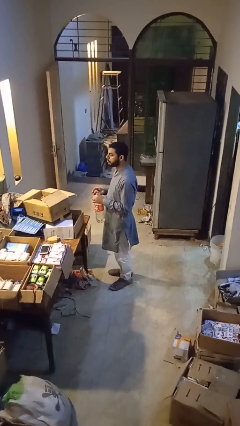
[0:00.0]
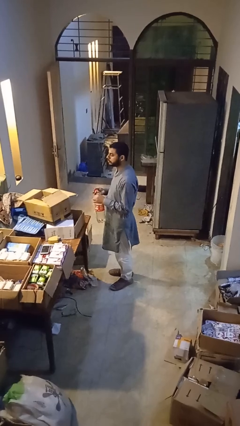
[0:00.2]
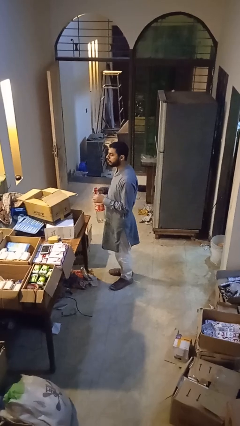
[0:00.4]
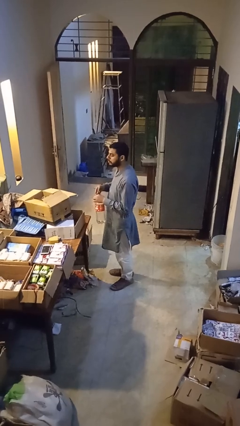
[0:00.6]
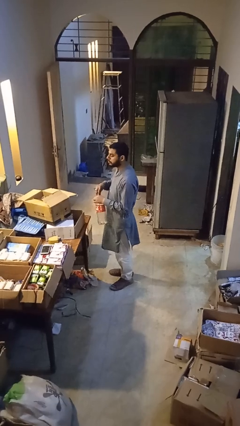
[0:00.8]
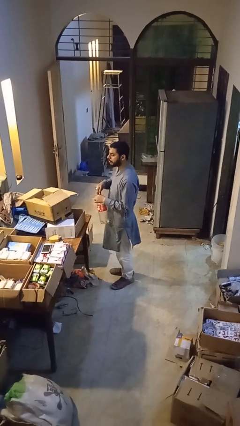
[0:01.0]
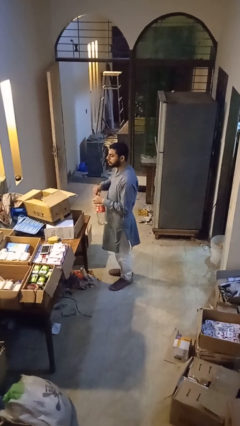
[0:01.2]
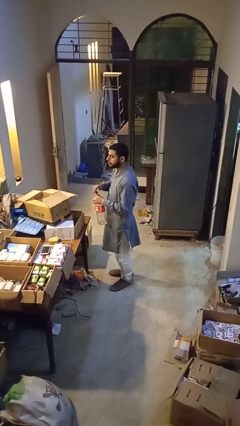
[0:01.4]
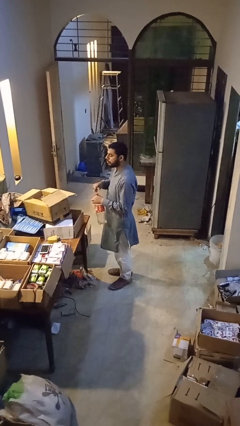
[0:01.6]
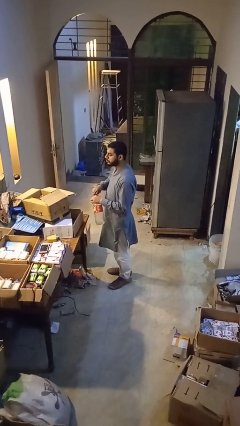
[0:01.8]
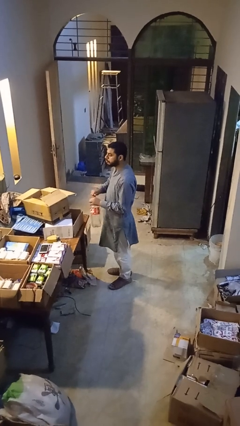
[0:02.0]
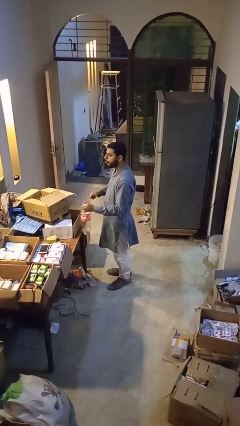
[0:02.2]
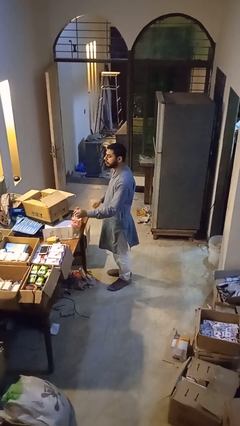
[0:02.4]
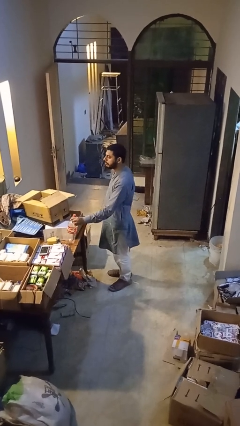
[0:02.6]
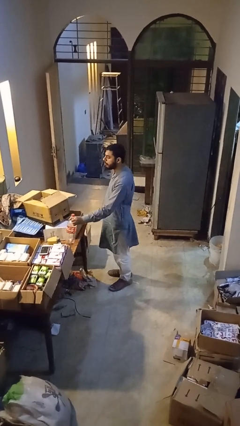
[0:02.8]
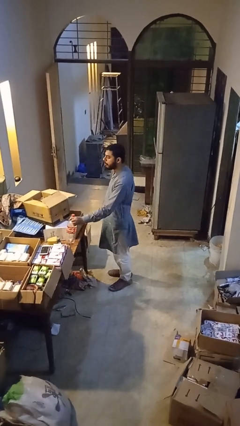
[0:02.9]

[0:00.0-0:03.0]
person screws lid to bottle

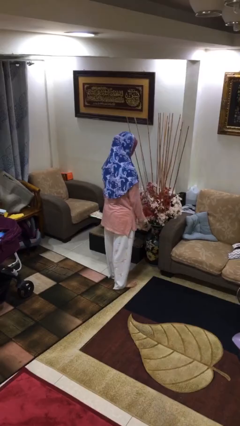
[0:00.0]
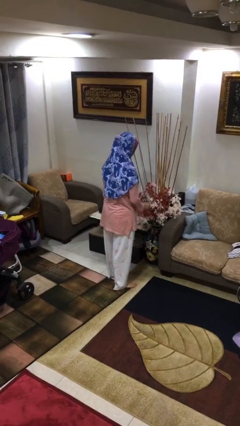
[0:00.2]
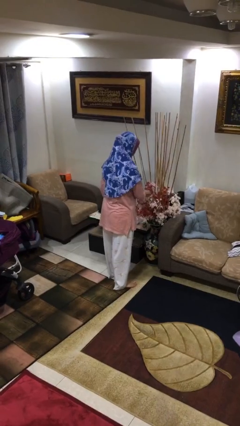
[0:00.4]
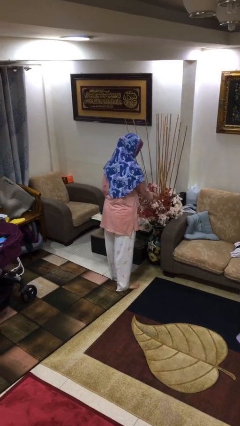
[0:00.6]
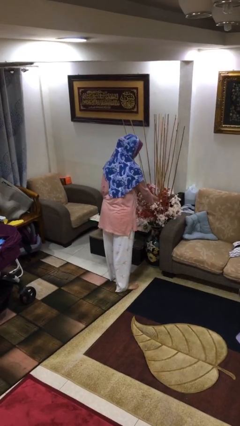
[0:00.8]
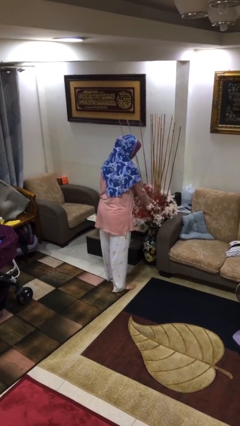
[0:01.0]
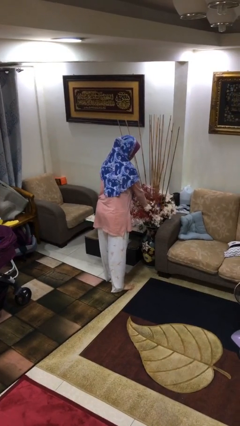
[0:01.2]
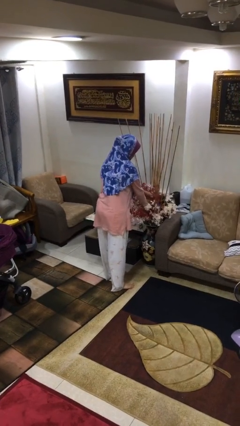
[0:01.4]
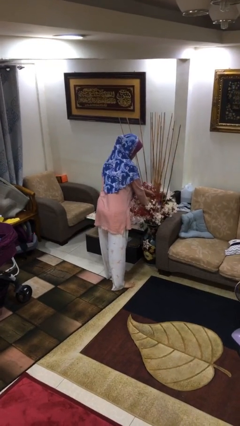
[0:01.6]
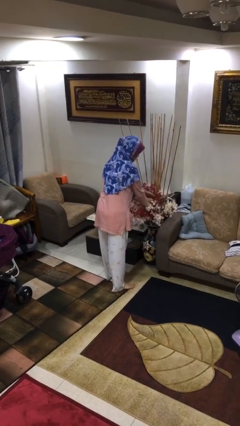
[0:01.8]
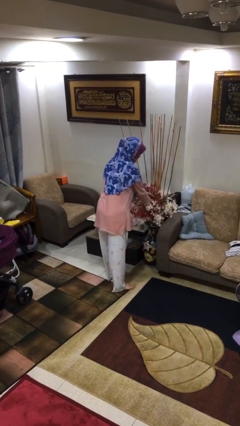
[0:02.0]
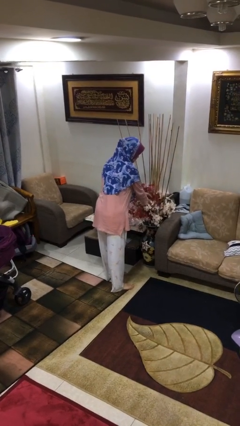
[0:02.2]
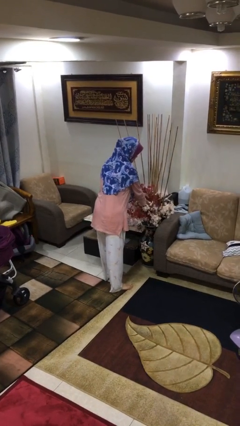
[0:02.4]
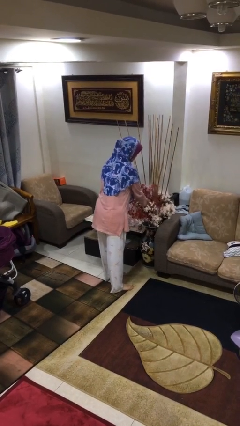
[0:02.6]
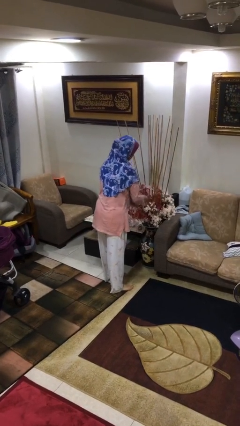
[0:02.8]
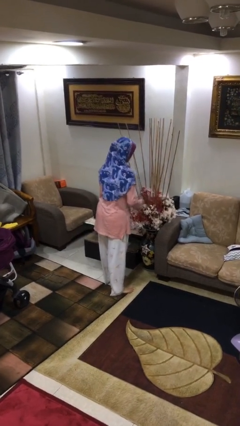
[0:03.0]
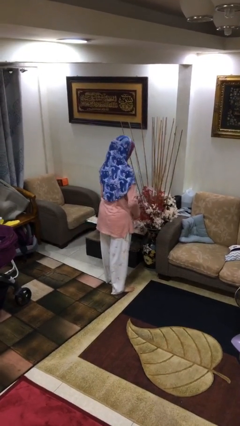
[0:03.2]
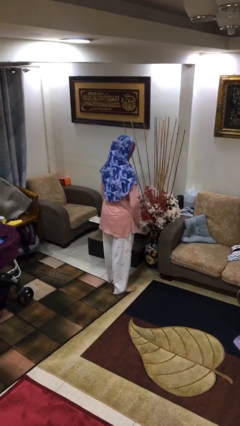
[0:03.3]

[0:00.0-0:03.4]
person arranges flowers in vase

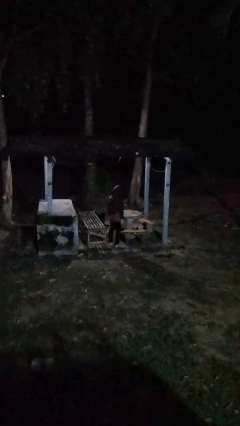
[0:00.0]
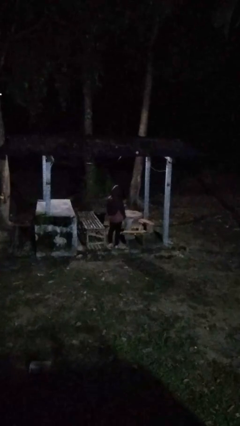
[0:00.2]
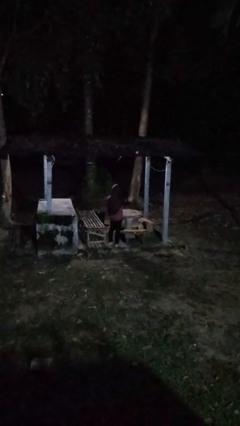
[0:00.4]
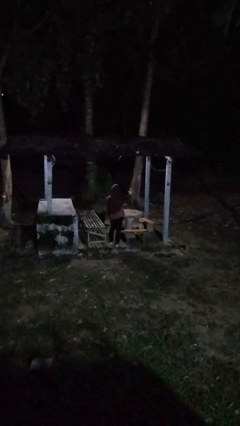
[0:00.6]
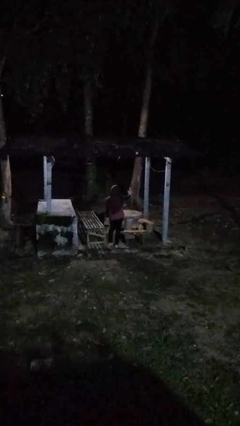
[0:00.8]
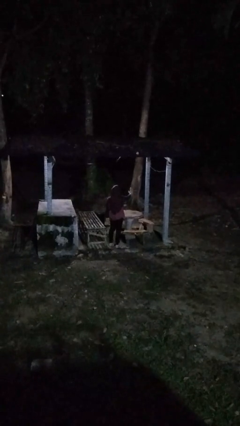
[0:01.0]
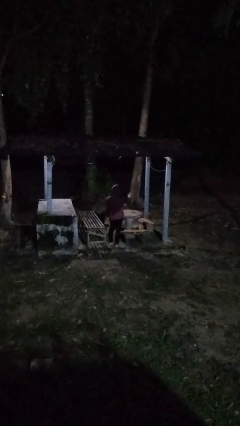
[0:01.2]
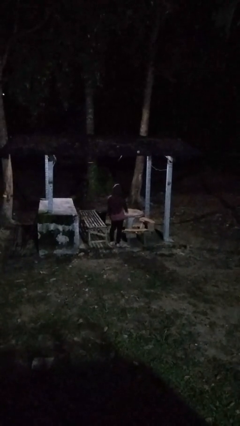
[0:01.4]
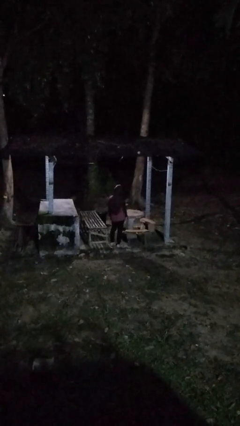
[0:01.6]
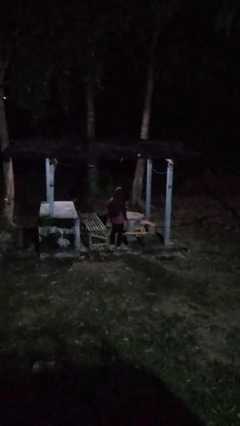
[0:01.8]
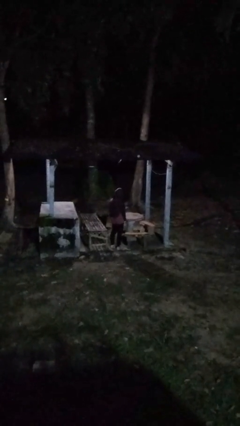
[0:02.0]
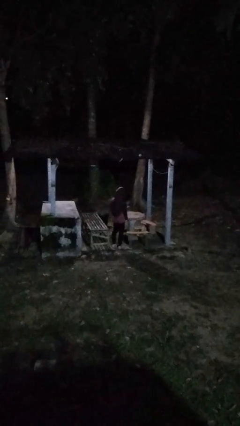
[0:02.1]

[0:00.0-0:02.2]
person gestures stop

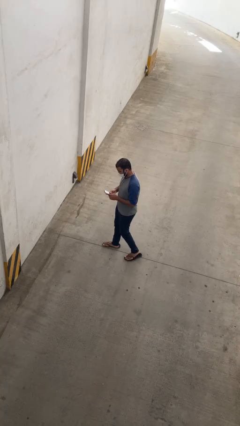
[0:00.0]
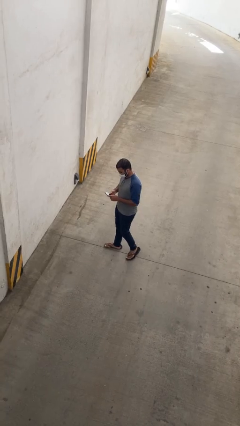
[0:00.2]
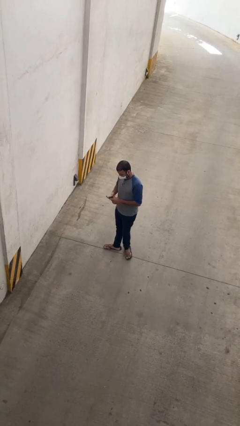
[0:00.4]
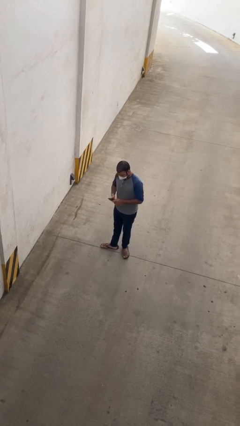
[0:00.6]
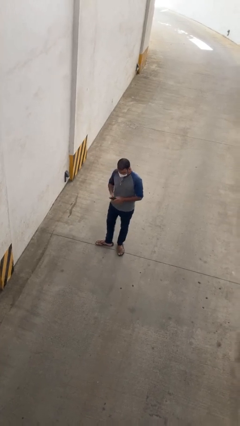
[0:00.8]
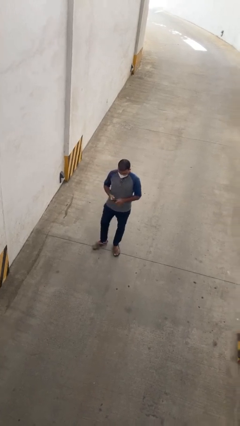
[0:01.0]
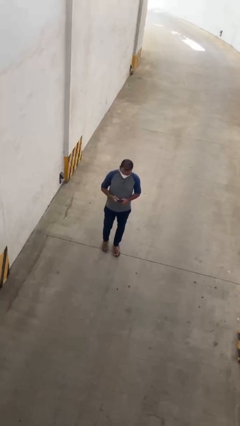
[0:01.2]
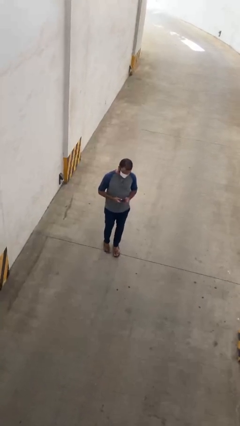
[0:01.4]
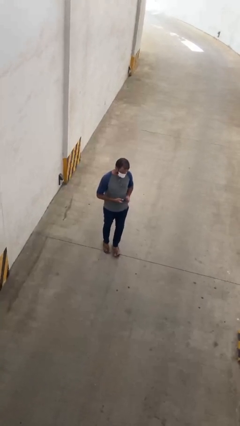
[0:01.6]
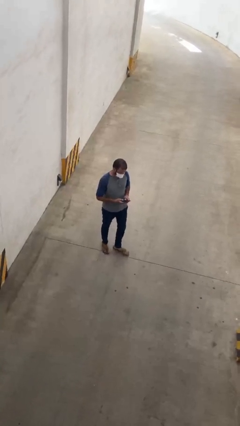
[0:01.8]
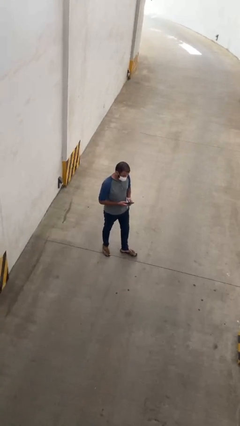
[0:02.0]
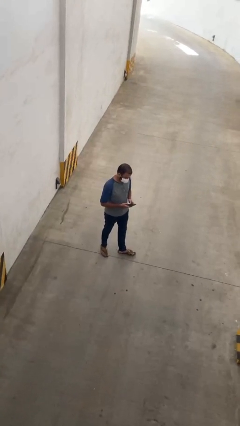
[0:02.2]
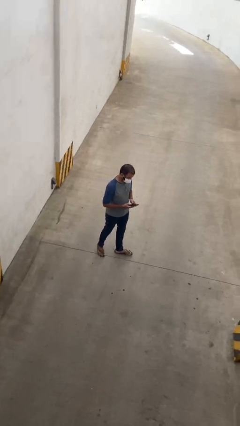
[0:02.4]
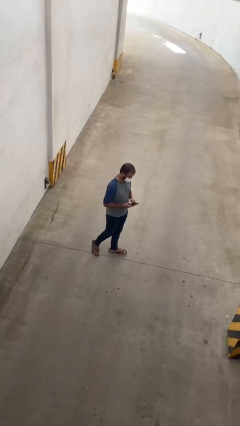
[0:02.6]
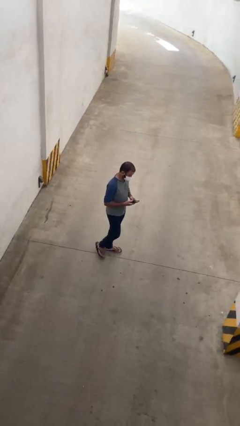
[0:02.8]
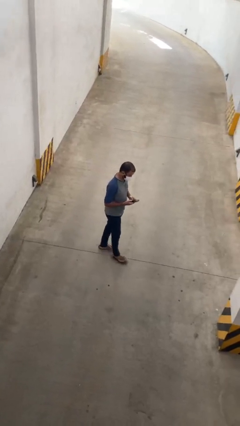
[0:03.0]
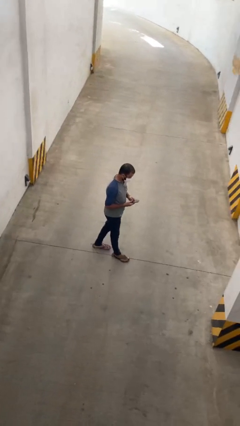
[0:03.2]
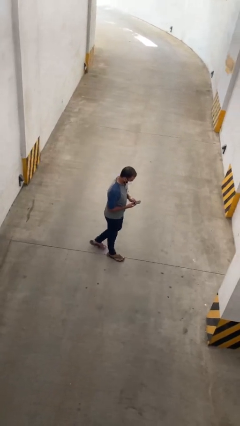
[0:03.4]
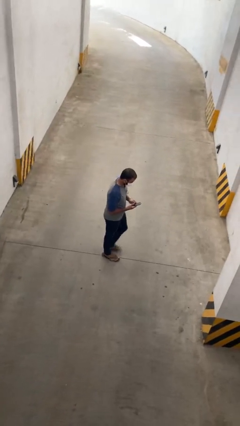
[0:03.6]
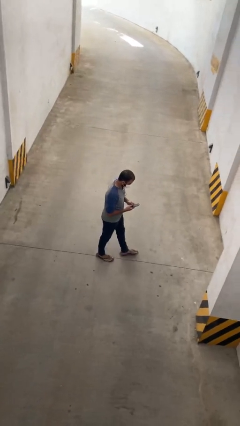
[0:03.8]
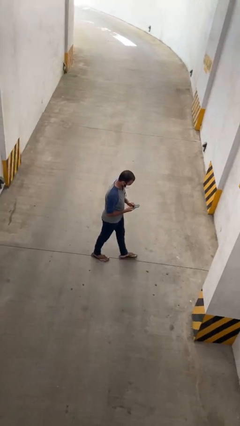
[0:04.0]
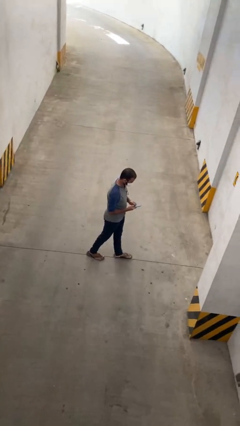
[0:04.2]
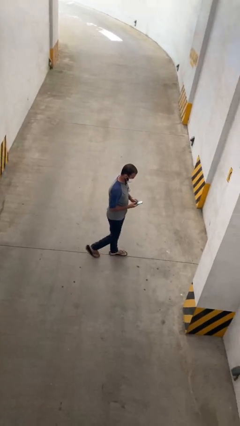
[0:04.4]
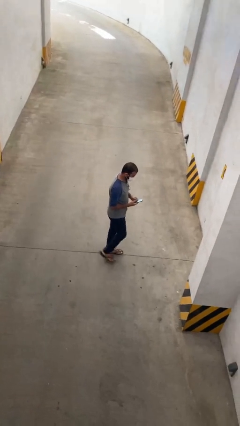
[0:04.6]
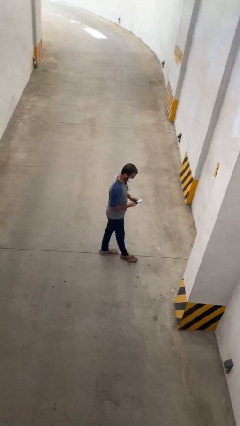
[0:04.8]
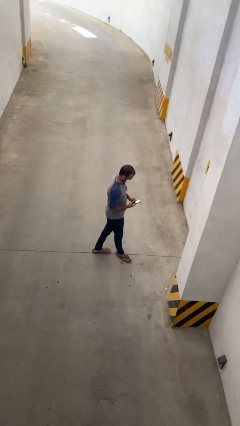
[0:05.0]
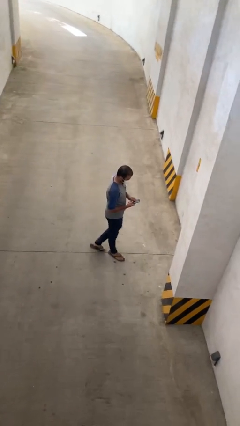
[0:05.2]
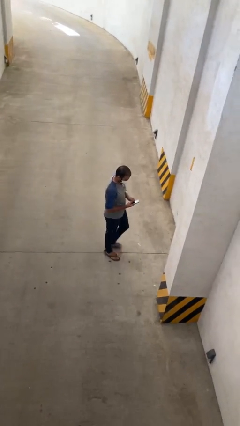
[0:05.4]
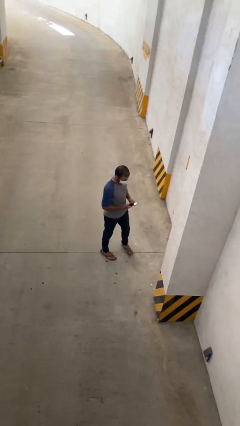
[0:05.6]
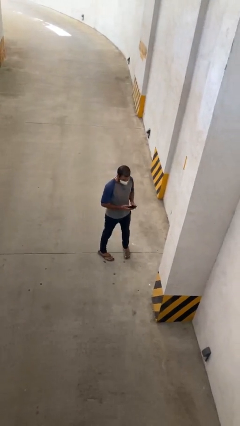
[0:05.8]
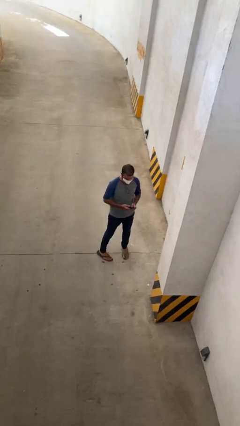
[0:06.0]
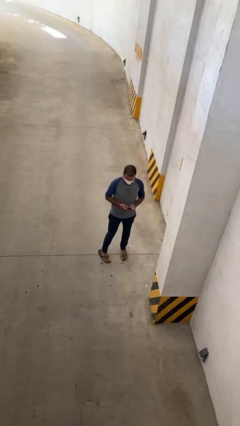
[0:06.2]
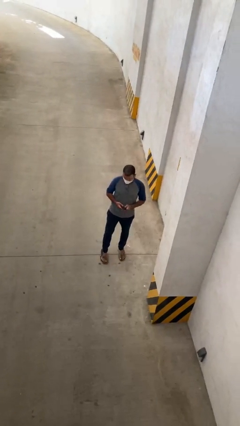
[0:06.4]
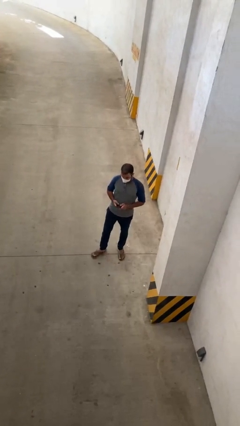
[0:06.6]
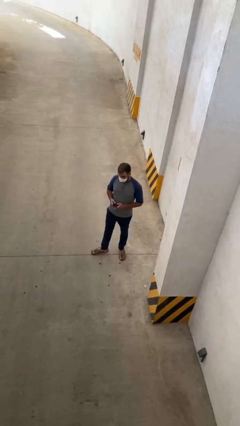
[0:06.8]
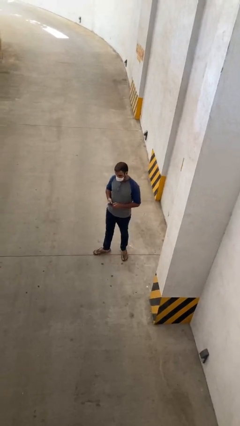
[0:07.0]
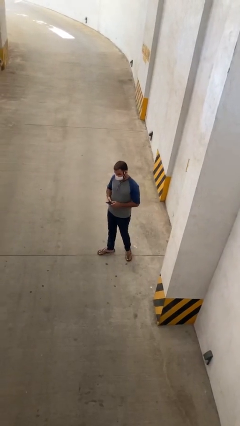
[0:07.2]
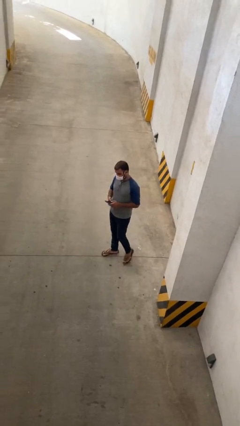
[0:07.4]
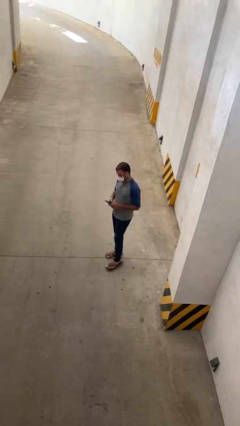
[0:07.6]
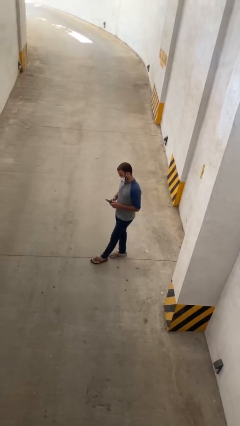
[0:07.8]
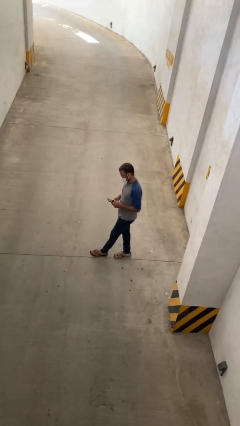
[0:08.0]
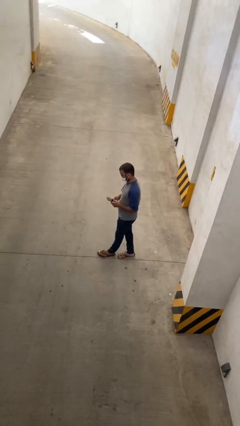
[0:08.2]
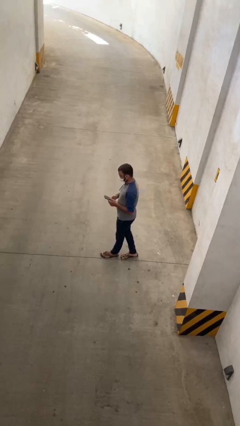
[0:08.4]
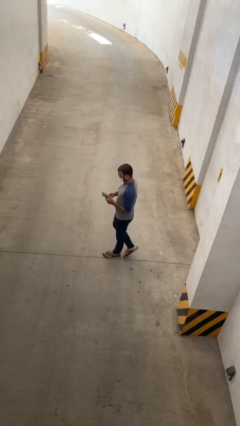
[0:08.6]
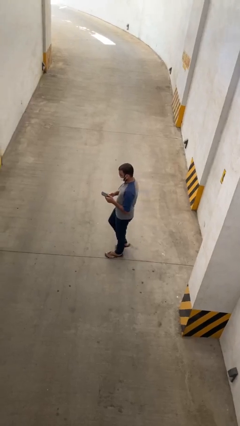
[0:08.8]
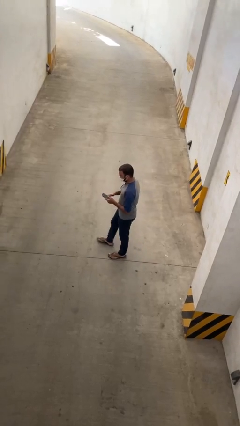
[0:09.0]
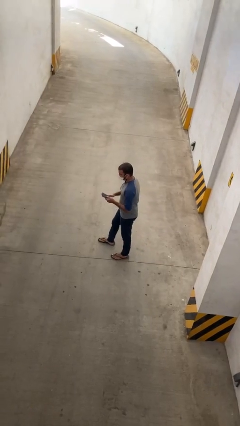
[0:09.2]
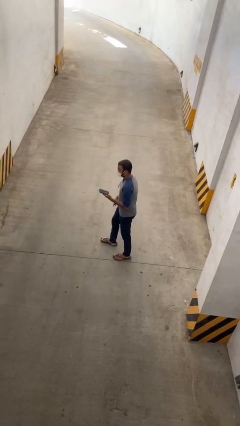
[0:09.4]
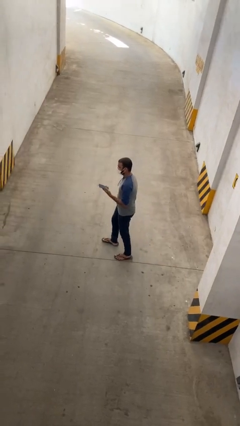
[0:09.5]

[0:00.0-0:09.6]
person texts on phone
